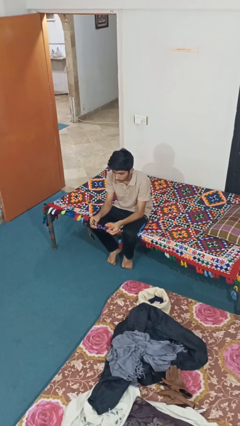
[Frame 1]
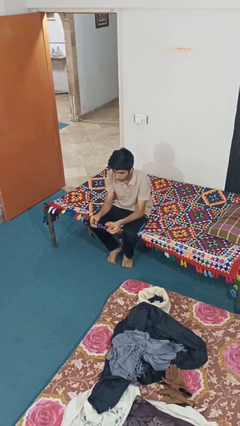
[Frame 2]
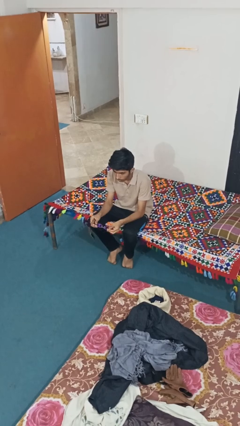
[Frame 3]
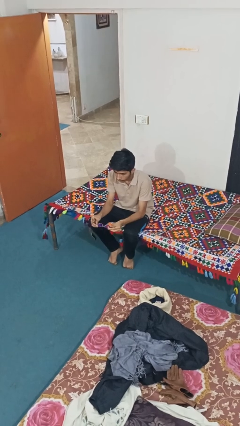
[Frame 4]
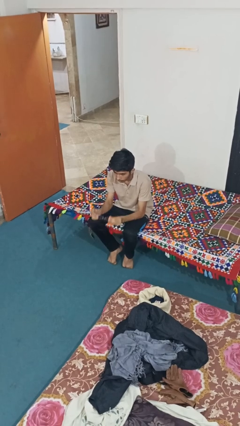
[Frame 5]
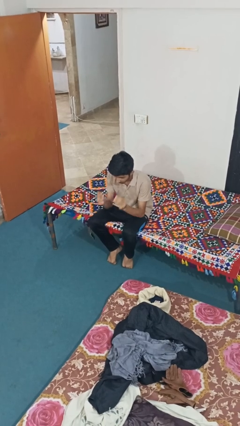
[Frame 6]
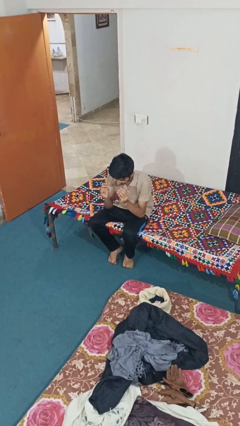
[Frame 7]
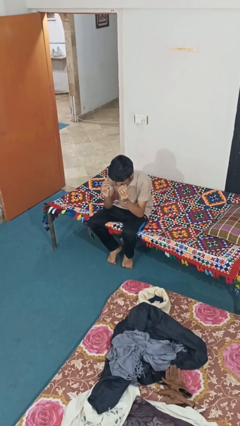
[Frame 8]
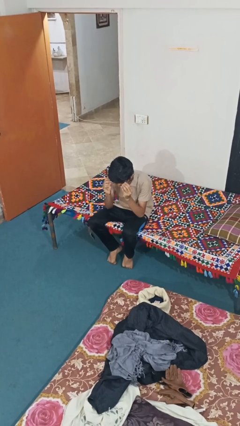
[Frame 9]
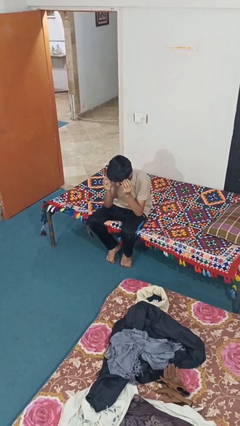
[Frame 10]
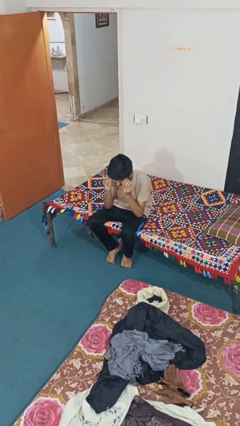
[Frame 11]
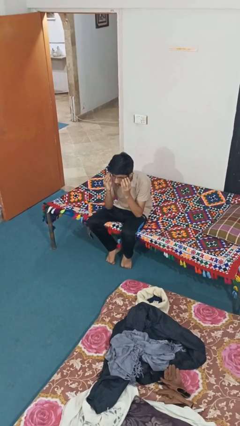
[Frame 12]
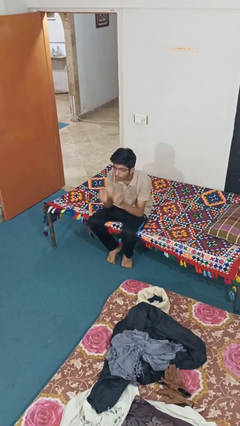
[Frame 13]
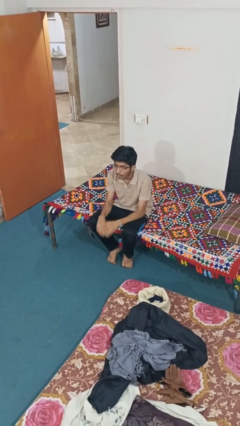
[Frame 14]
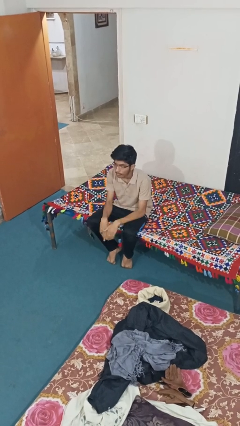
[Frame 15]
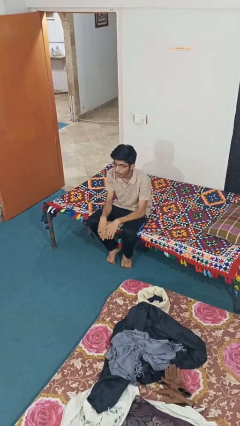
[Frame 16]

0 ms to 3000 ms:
person puts on glasses

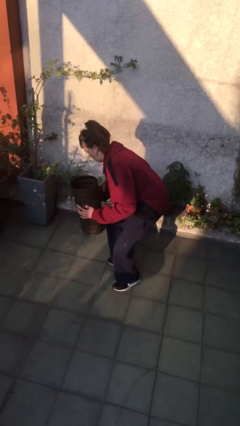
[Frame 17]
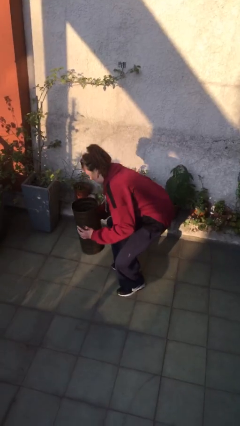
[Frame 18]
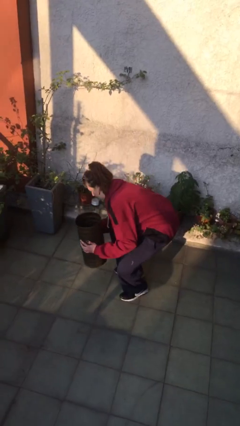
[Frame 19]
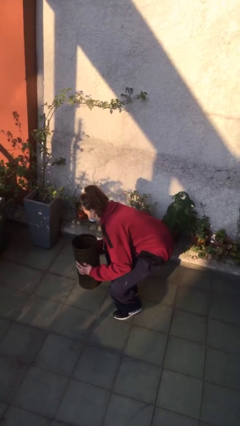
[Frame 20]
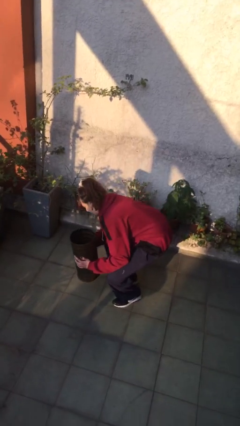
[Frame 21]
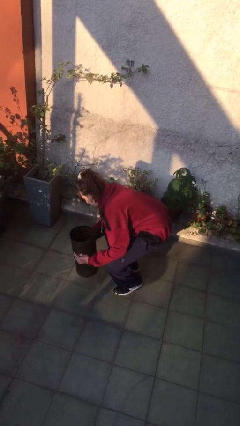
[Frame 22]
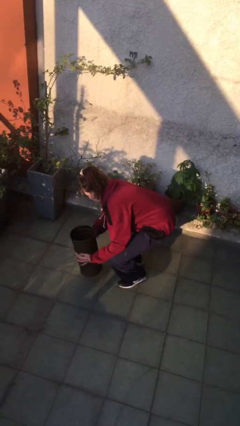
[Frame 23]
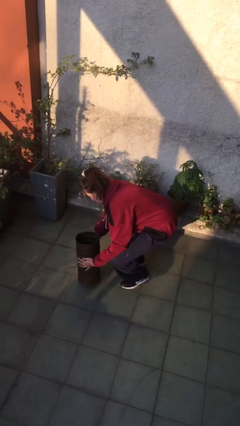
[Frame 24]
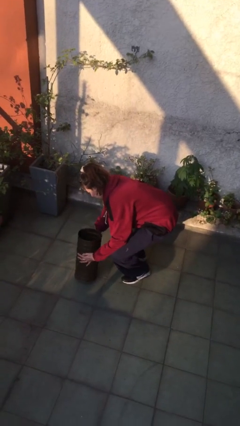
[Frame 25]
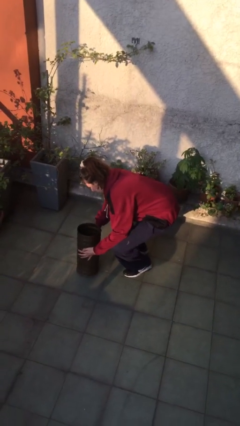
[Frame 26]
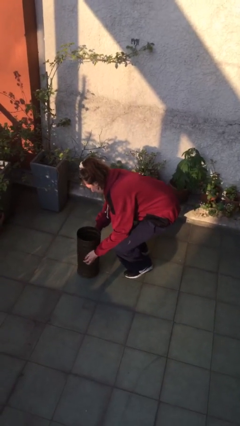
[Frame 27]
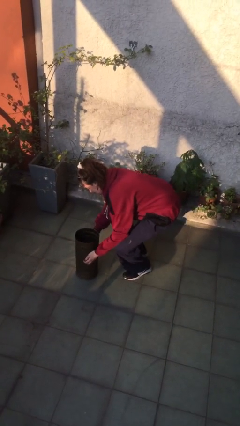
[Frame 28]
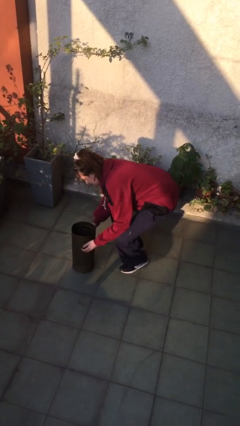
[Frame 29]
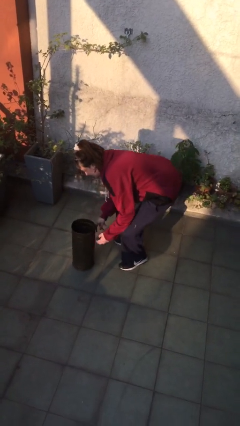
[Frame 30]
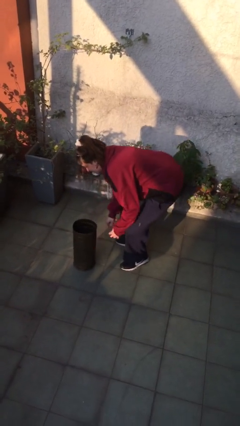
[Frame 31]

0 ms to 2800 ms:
person puts down object on floor

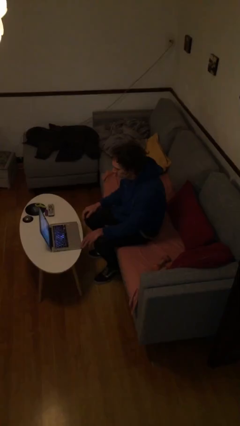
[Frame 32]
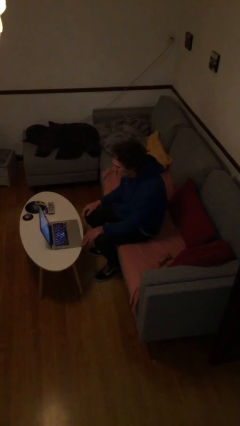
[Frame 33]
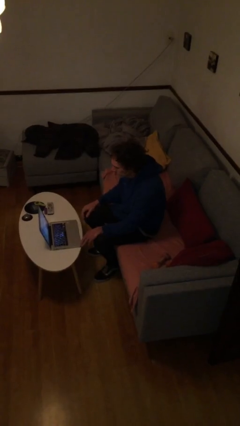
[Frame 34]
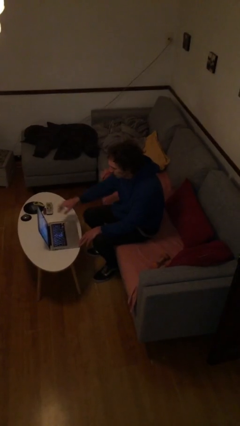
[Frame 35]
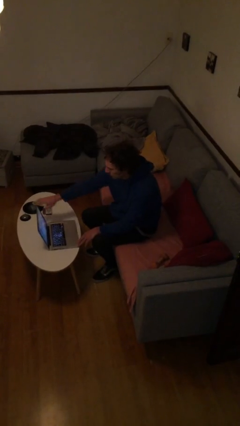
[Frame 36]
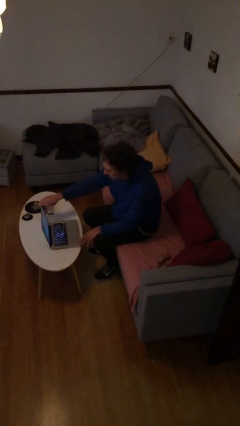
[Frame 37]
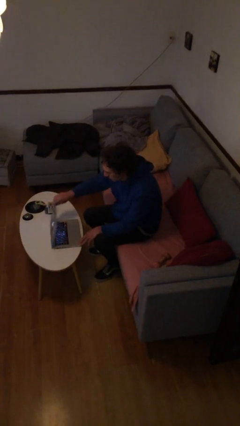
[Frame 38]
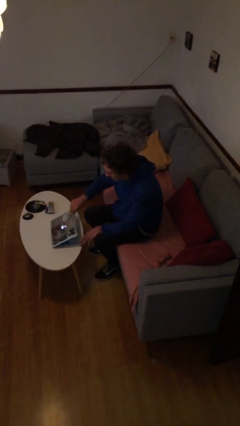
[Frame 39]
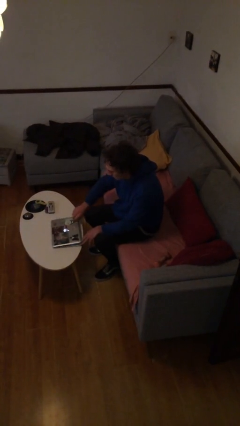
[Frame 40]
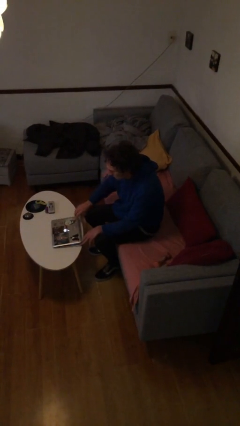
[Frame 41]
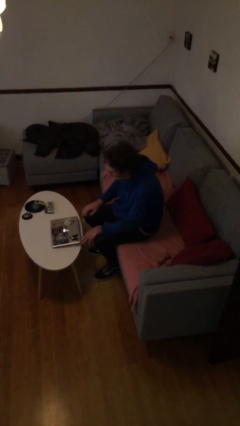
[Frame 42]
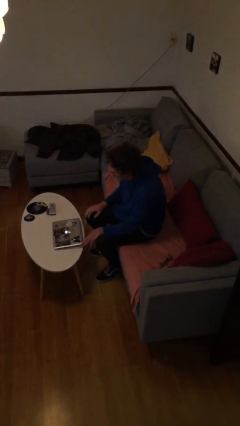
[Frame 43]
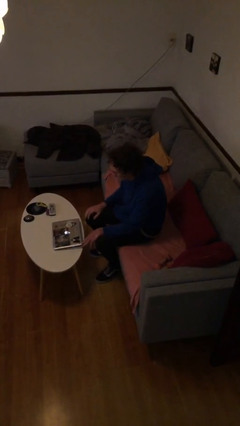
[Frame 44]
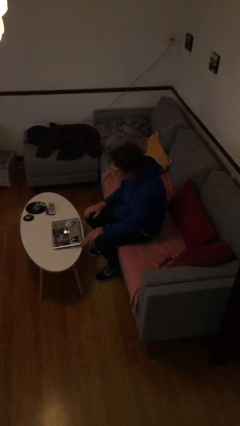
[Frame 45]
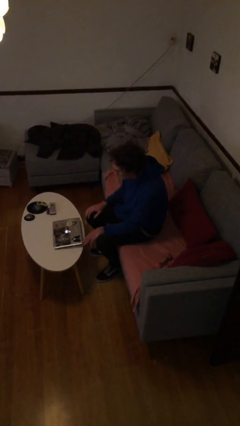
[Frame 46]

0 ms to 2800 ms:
person closes laptop

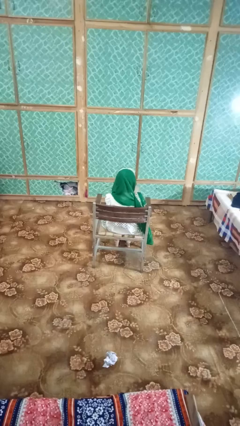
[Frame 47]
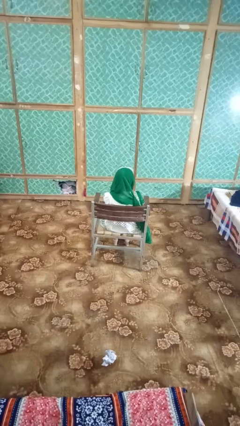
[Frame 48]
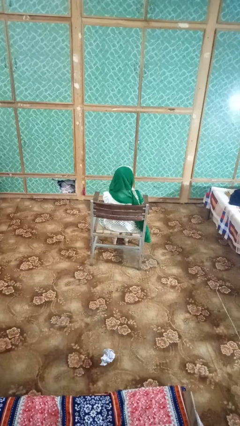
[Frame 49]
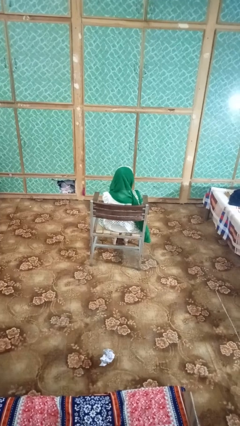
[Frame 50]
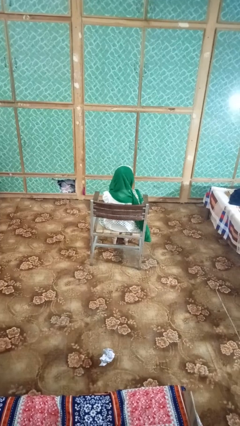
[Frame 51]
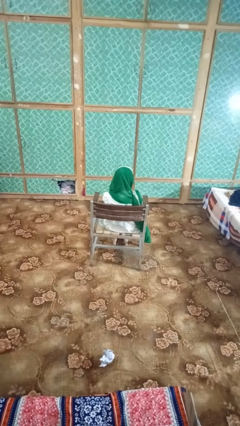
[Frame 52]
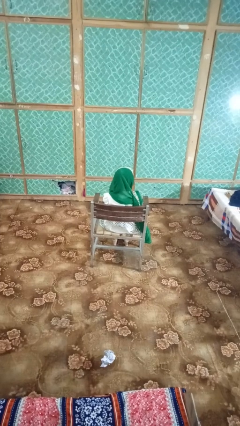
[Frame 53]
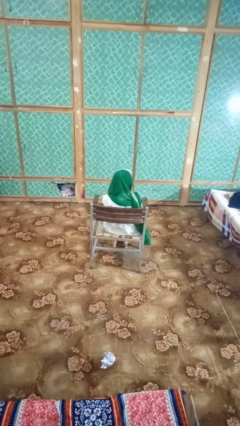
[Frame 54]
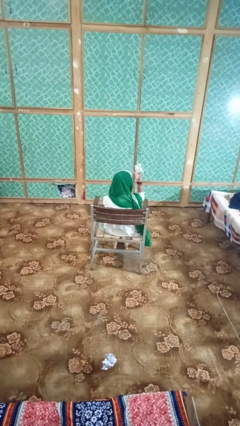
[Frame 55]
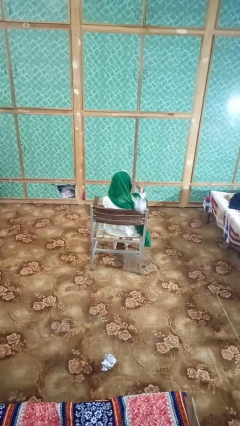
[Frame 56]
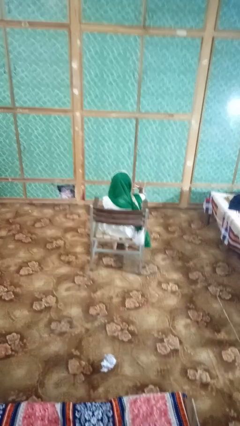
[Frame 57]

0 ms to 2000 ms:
person crumples paper

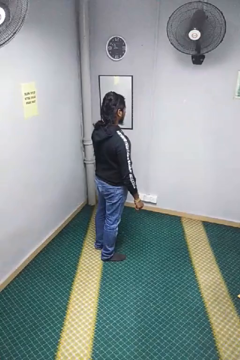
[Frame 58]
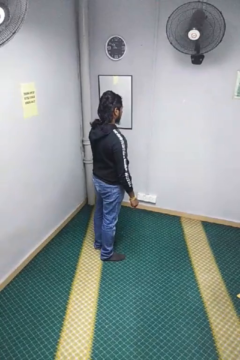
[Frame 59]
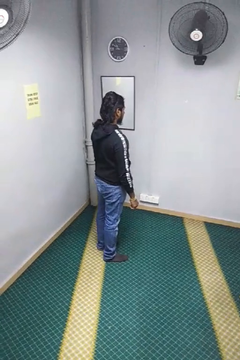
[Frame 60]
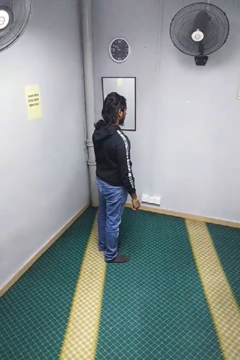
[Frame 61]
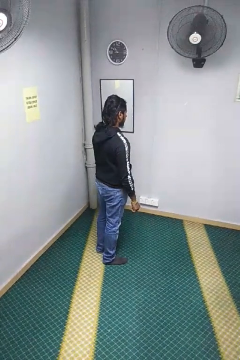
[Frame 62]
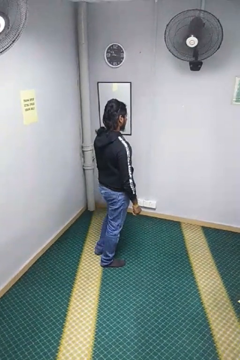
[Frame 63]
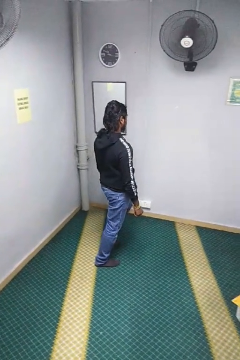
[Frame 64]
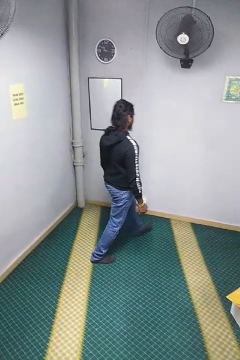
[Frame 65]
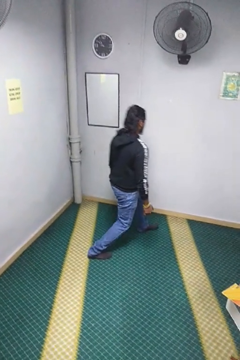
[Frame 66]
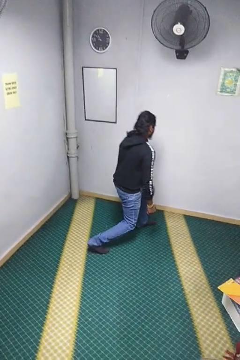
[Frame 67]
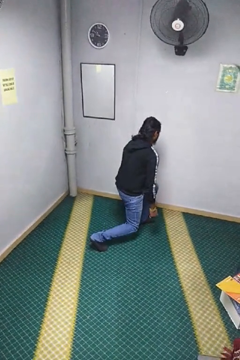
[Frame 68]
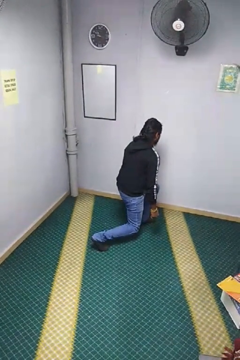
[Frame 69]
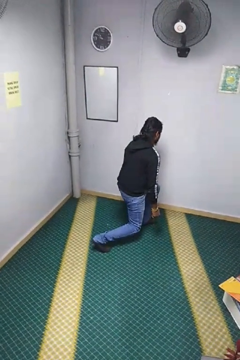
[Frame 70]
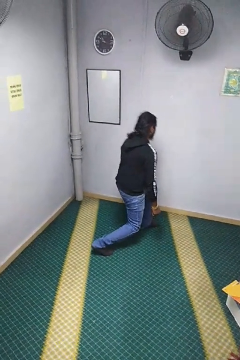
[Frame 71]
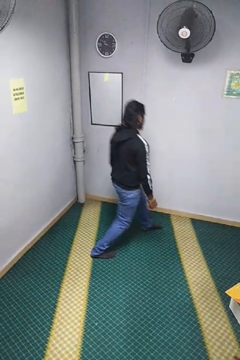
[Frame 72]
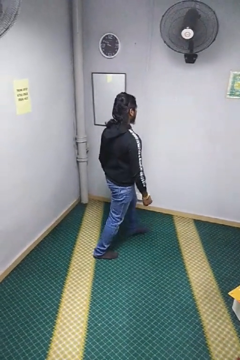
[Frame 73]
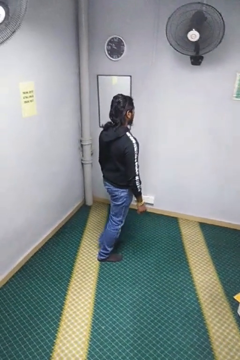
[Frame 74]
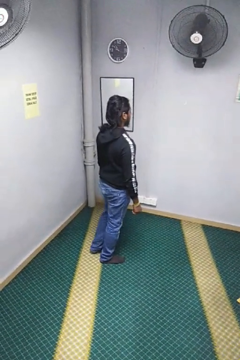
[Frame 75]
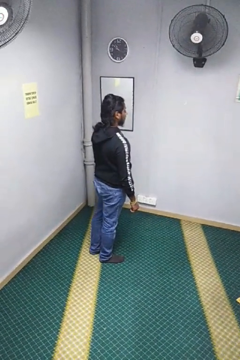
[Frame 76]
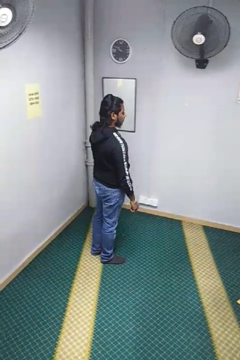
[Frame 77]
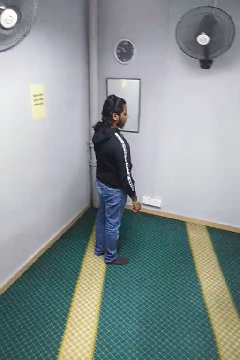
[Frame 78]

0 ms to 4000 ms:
person exercises with lunges

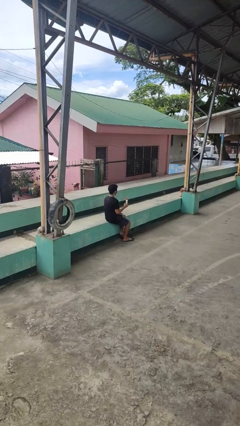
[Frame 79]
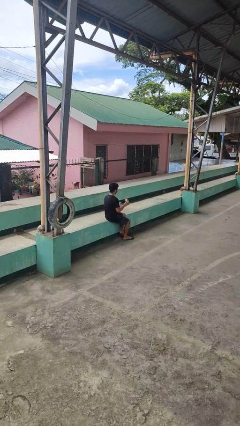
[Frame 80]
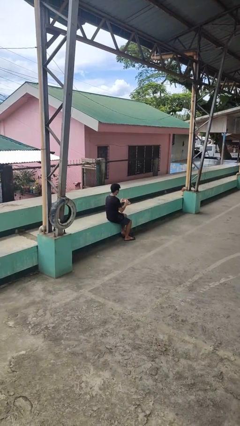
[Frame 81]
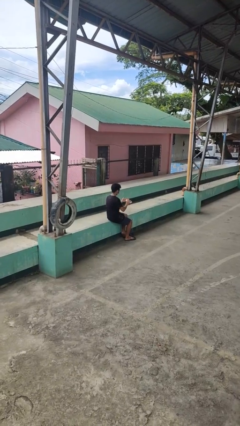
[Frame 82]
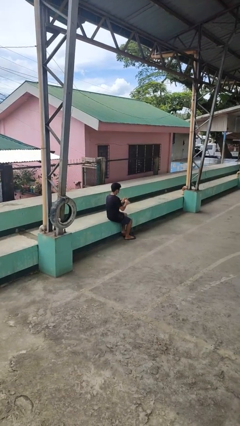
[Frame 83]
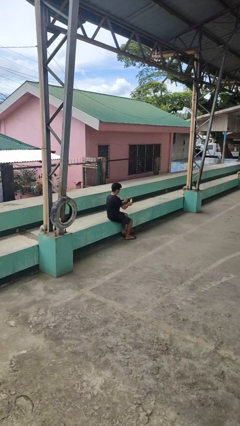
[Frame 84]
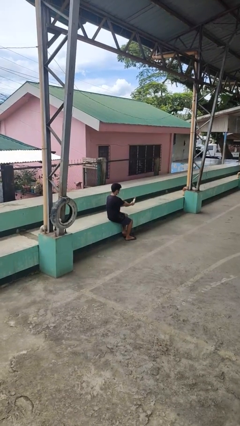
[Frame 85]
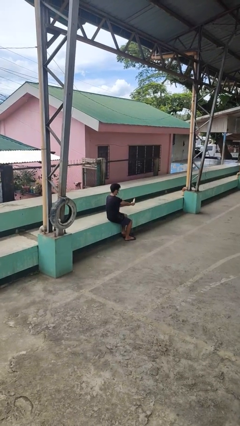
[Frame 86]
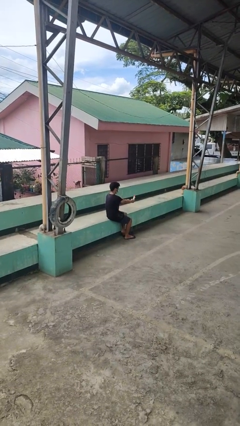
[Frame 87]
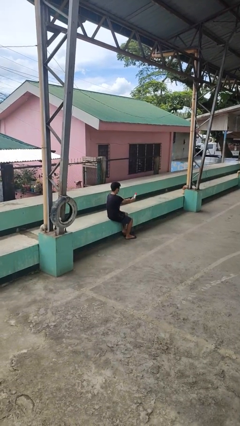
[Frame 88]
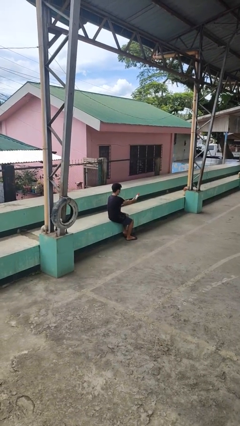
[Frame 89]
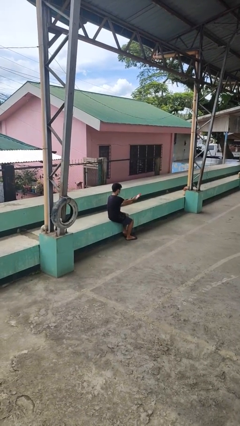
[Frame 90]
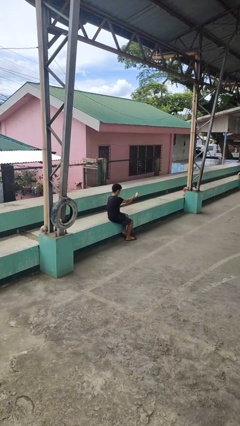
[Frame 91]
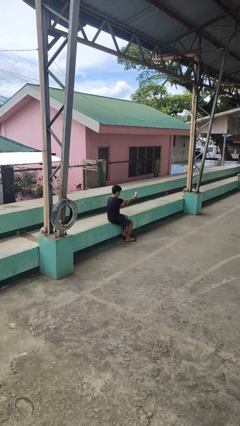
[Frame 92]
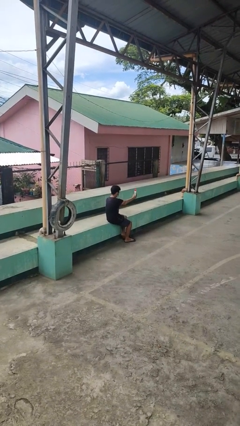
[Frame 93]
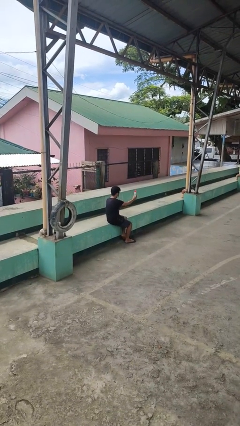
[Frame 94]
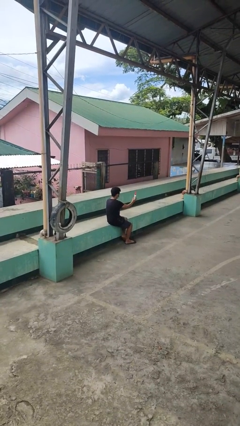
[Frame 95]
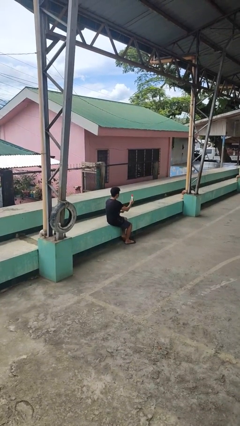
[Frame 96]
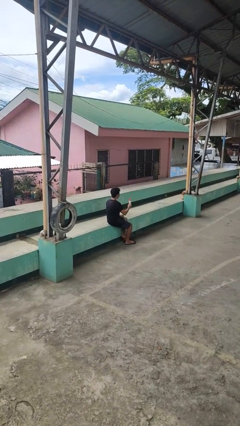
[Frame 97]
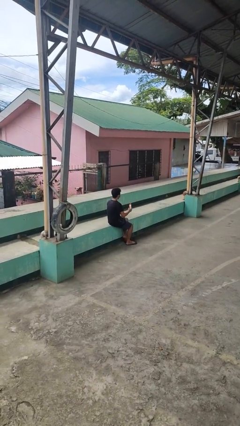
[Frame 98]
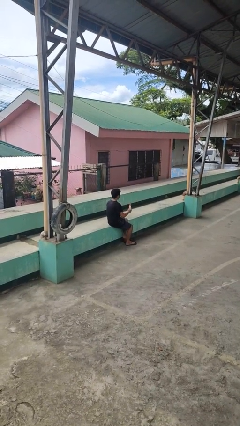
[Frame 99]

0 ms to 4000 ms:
person applies sunscreen
